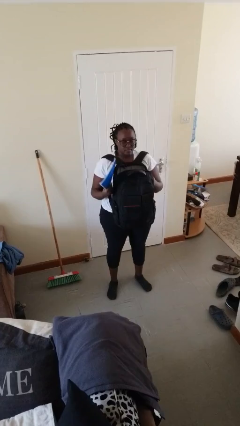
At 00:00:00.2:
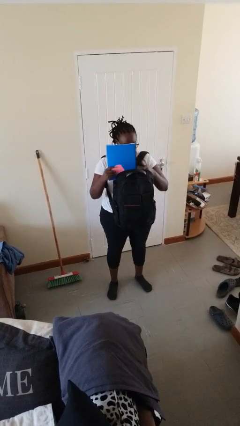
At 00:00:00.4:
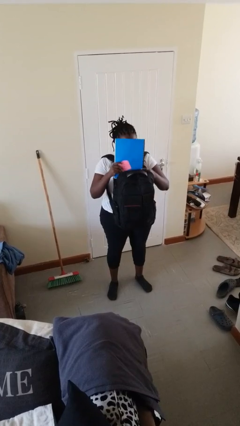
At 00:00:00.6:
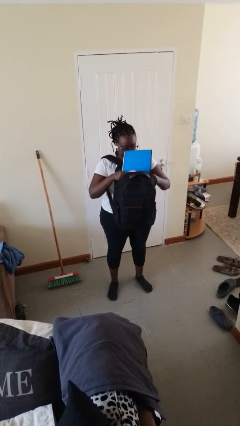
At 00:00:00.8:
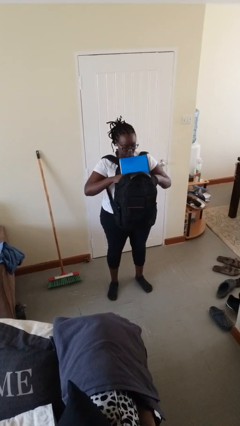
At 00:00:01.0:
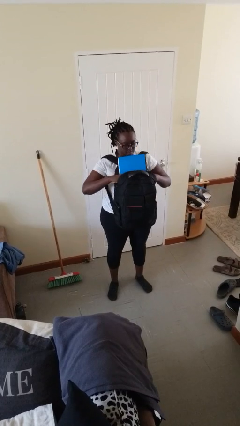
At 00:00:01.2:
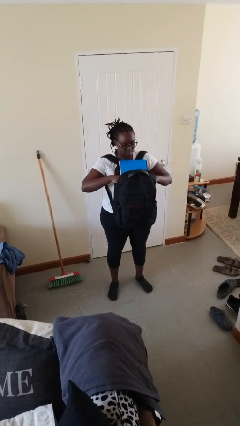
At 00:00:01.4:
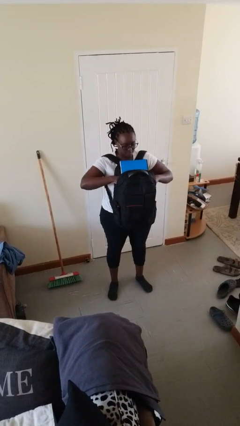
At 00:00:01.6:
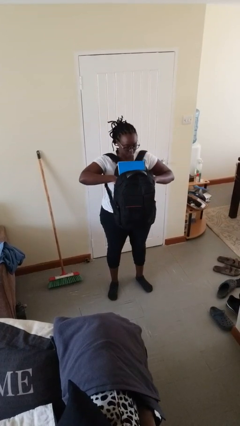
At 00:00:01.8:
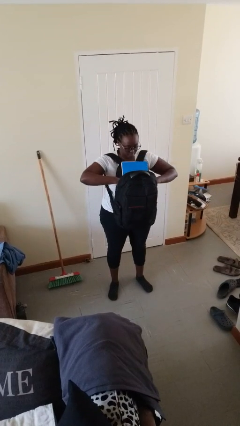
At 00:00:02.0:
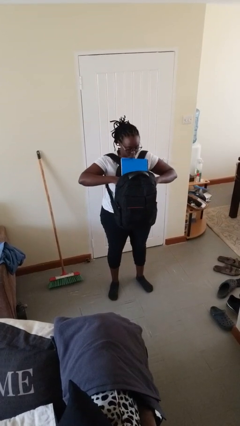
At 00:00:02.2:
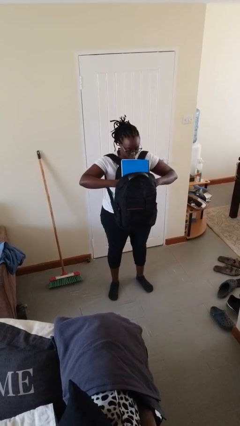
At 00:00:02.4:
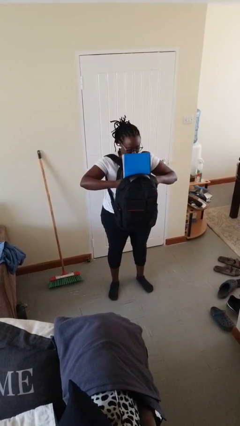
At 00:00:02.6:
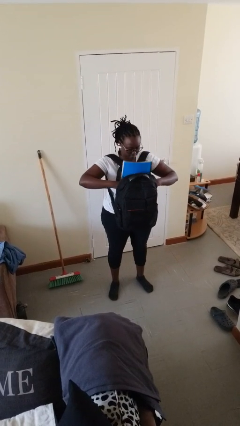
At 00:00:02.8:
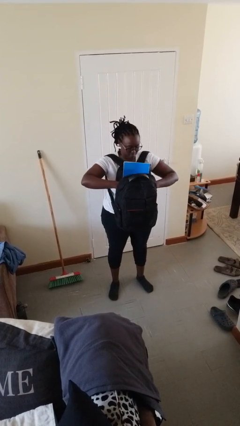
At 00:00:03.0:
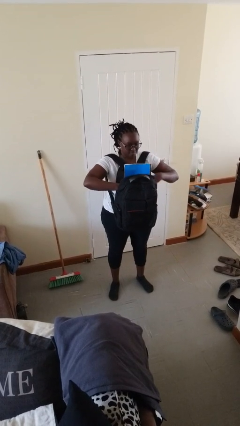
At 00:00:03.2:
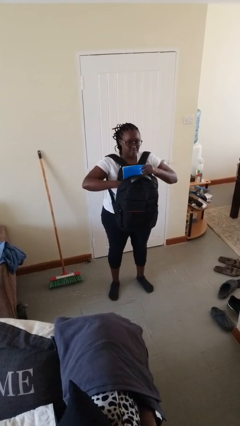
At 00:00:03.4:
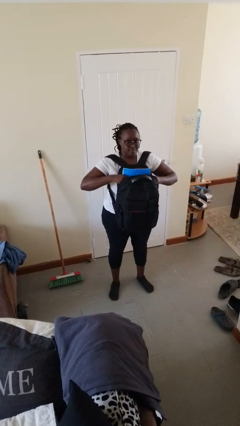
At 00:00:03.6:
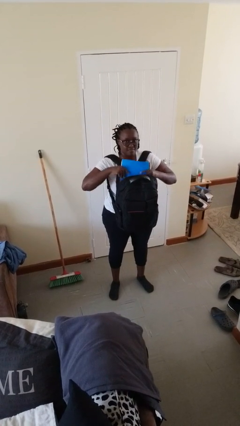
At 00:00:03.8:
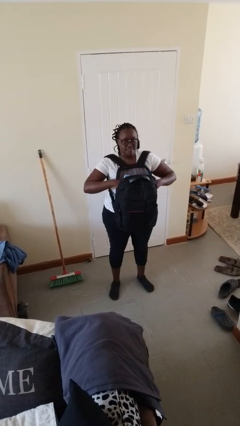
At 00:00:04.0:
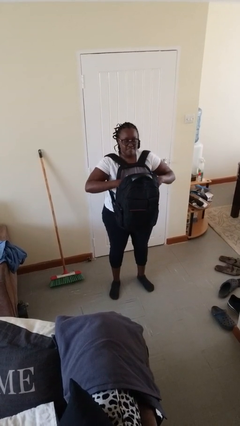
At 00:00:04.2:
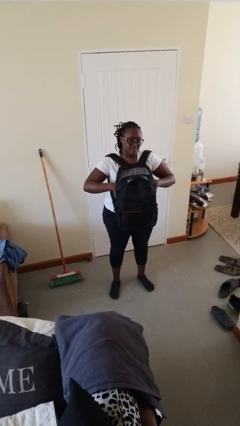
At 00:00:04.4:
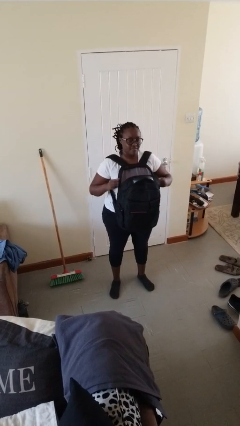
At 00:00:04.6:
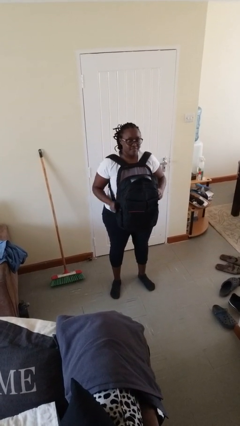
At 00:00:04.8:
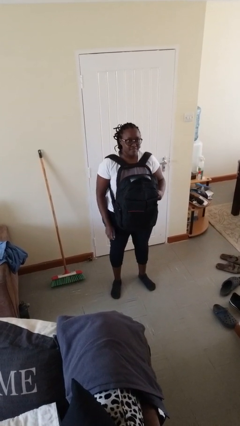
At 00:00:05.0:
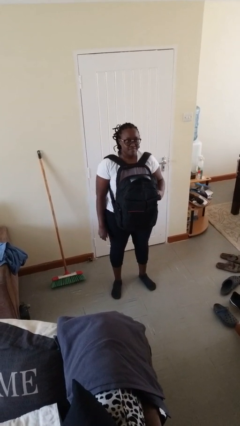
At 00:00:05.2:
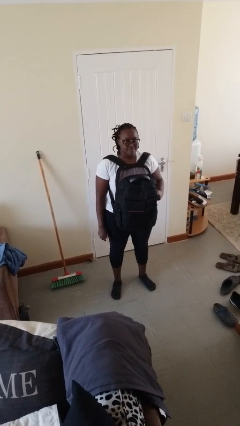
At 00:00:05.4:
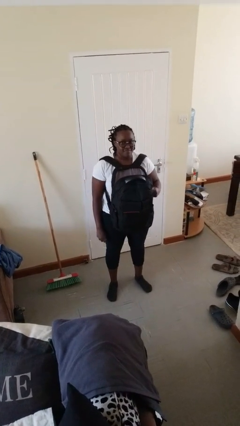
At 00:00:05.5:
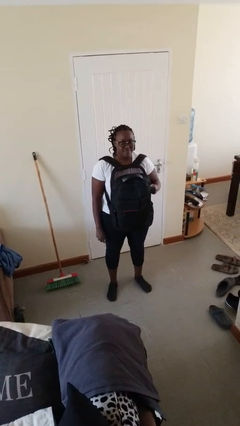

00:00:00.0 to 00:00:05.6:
person puts object into backpack

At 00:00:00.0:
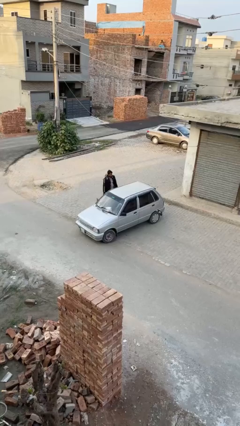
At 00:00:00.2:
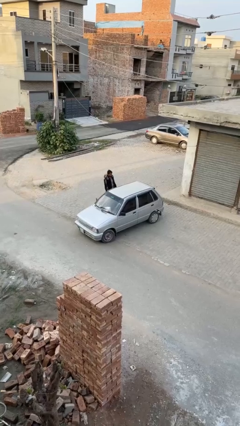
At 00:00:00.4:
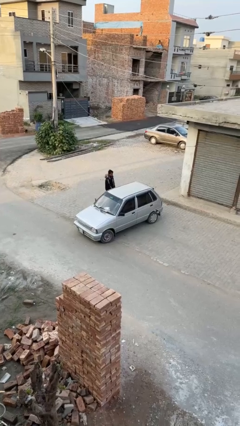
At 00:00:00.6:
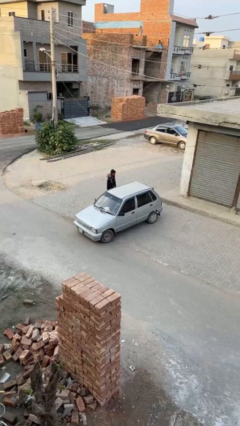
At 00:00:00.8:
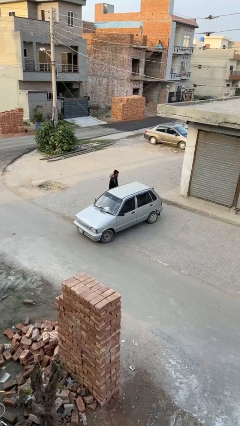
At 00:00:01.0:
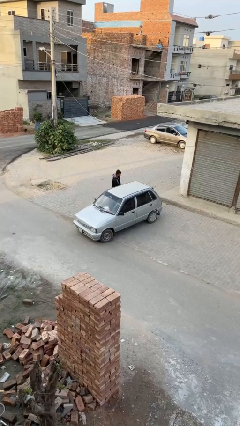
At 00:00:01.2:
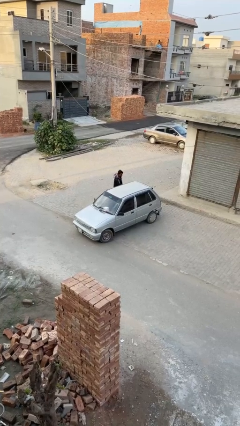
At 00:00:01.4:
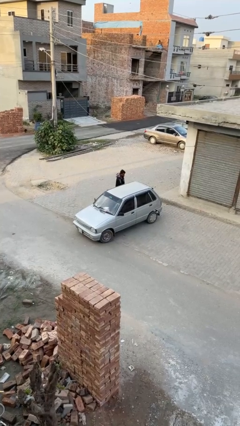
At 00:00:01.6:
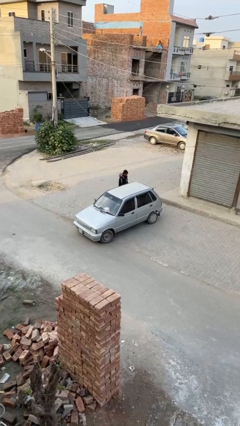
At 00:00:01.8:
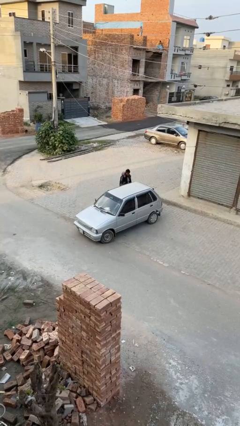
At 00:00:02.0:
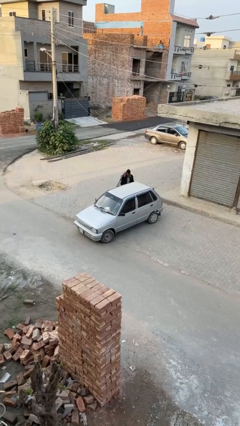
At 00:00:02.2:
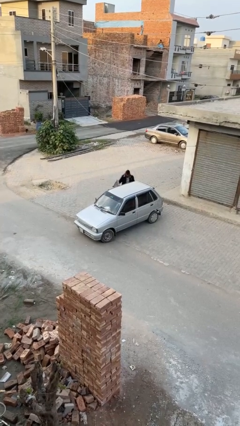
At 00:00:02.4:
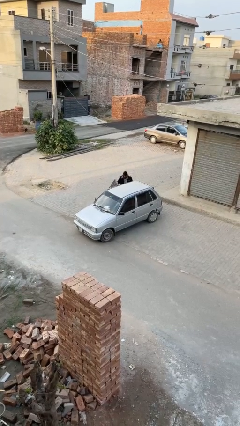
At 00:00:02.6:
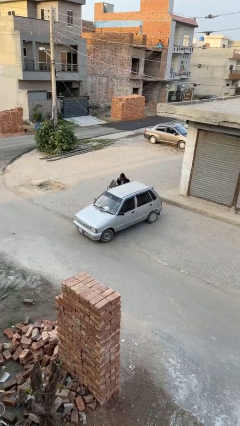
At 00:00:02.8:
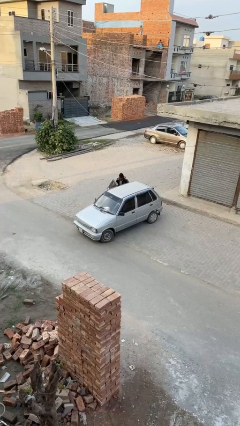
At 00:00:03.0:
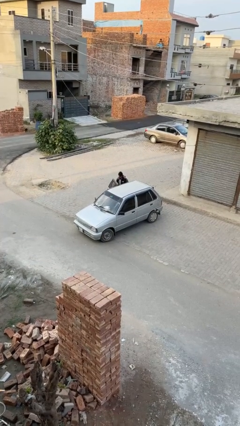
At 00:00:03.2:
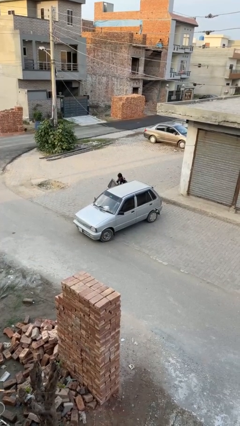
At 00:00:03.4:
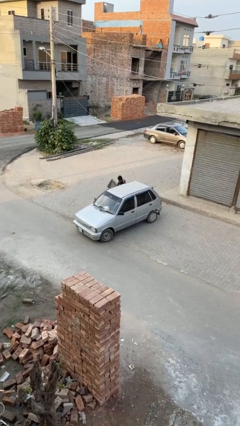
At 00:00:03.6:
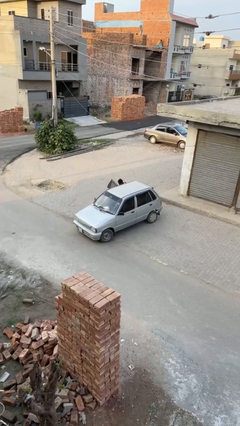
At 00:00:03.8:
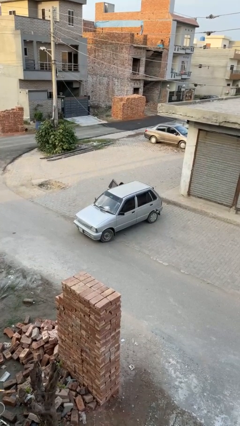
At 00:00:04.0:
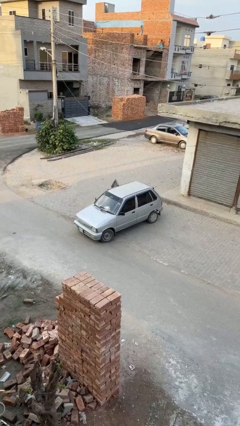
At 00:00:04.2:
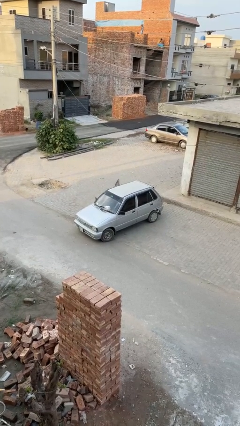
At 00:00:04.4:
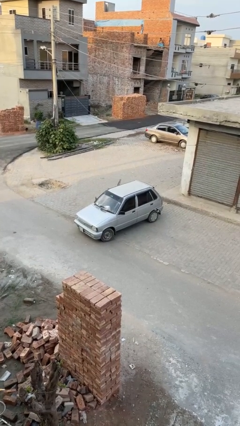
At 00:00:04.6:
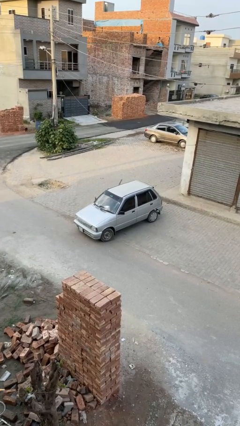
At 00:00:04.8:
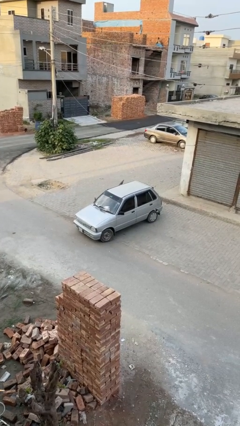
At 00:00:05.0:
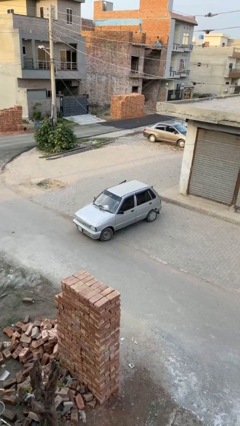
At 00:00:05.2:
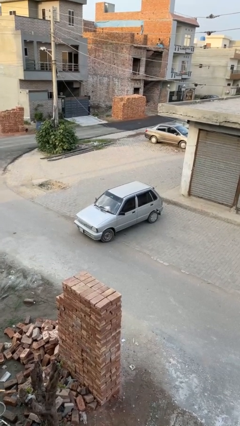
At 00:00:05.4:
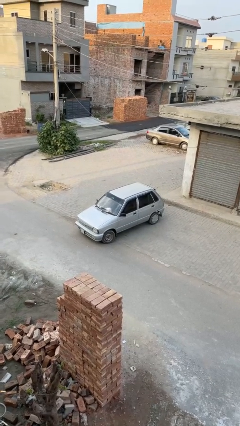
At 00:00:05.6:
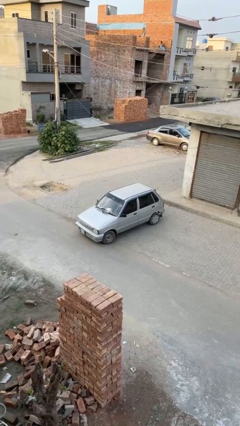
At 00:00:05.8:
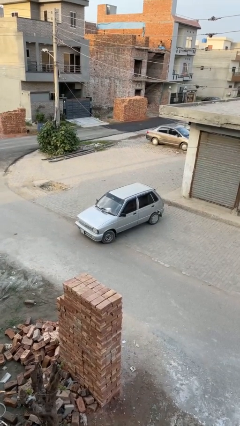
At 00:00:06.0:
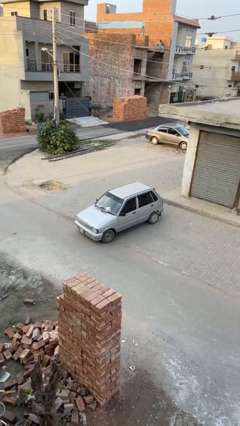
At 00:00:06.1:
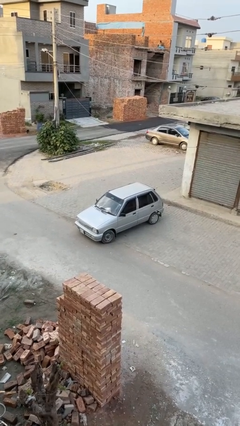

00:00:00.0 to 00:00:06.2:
car picks up person

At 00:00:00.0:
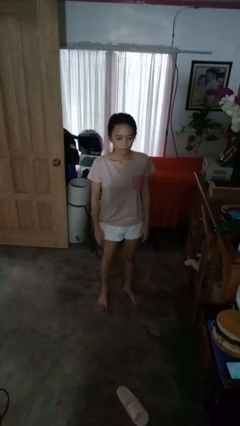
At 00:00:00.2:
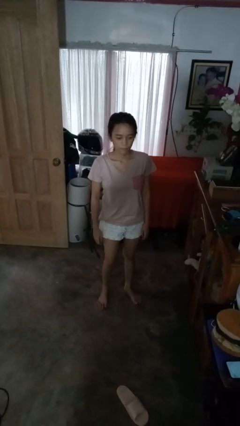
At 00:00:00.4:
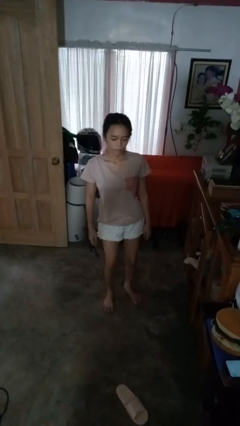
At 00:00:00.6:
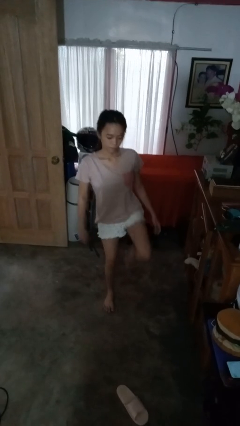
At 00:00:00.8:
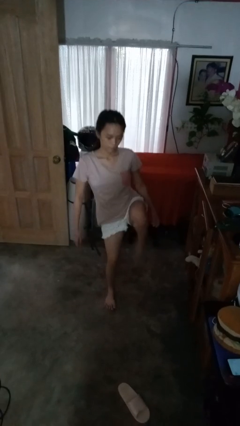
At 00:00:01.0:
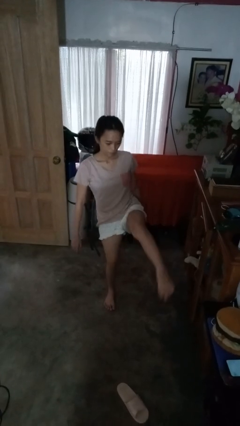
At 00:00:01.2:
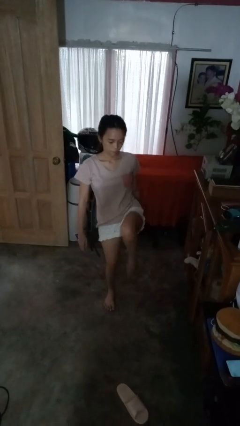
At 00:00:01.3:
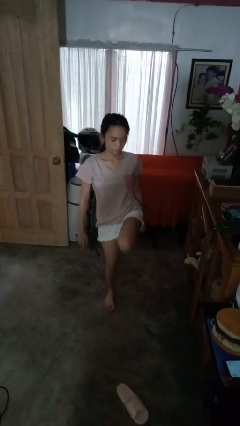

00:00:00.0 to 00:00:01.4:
person karate kicks

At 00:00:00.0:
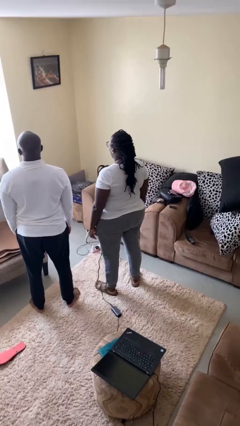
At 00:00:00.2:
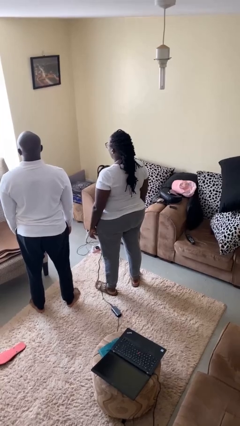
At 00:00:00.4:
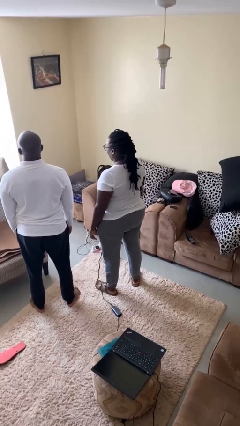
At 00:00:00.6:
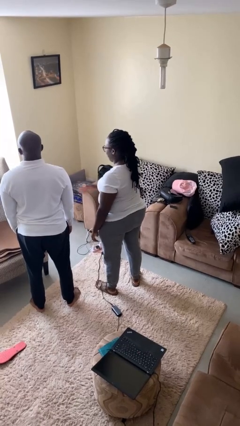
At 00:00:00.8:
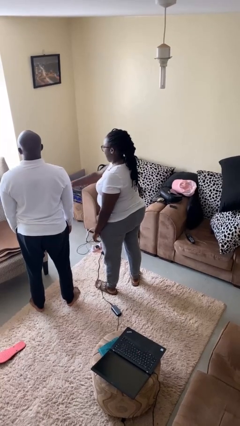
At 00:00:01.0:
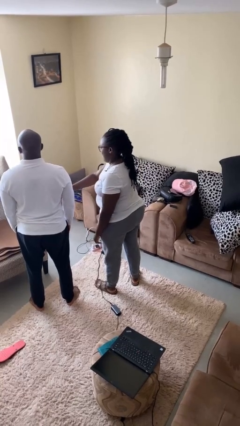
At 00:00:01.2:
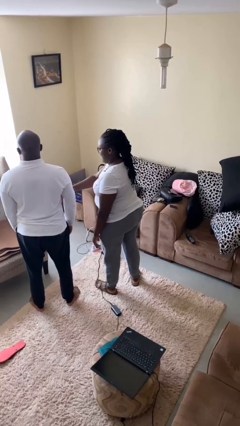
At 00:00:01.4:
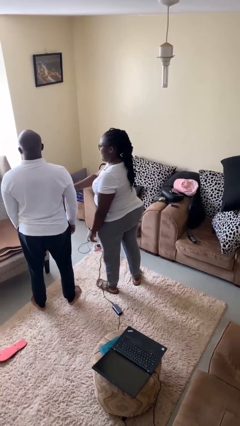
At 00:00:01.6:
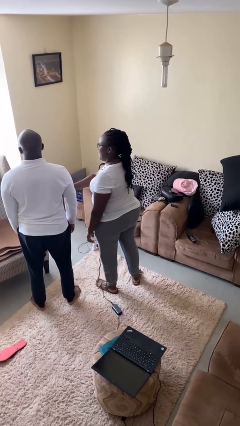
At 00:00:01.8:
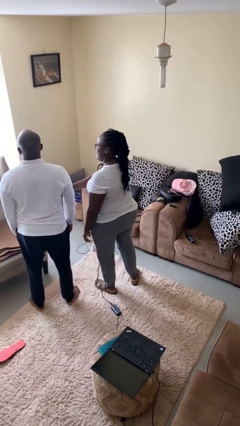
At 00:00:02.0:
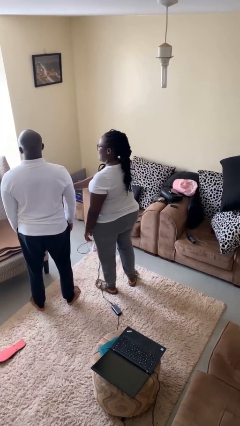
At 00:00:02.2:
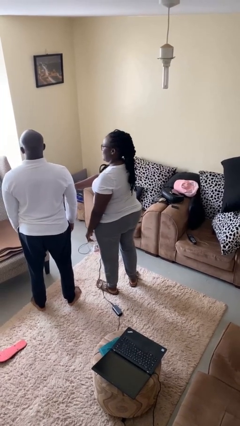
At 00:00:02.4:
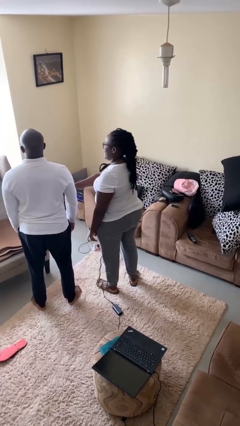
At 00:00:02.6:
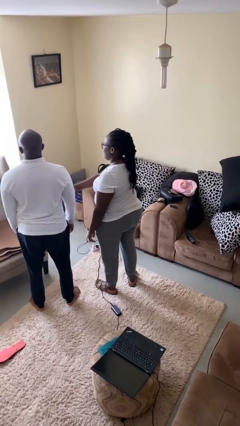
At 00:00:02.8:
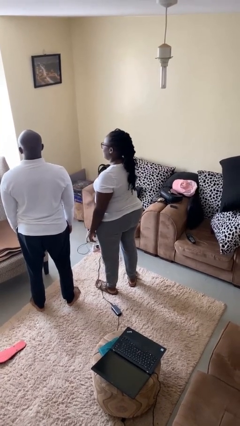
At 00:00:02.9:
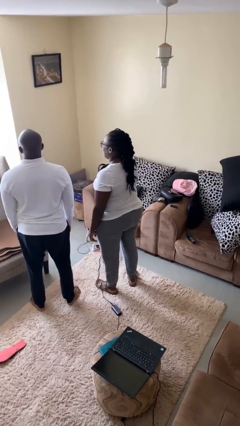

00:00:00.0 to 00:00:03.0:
person grabs person by bicep

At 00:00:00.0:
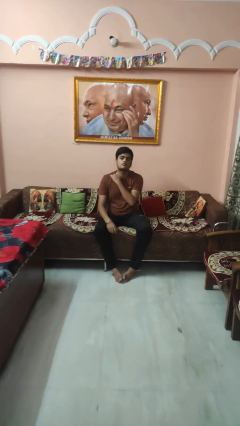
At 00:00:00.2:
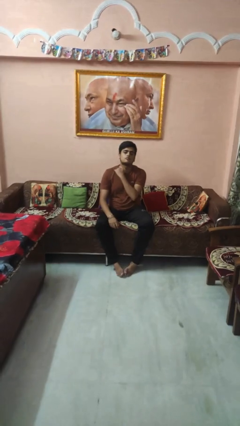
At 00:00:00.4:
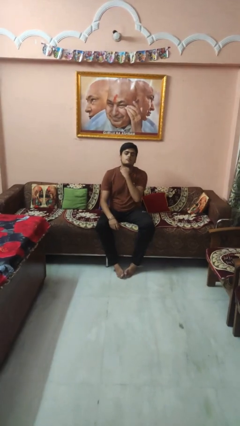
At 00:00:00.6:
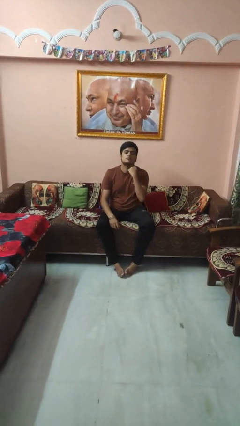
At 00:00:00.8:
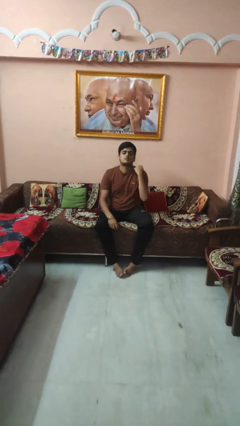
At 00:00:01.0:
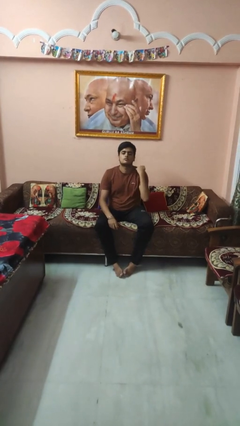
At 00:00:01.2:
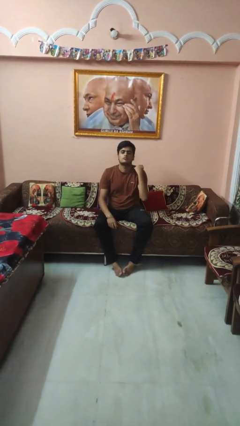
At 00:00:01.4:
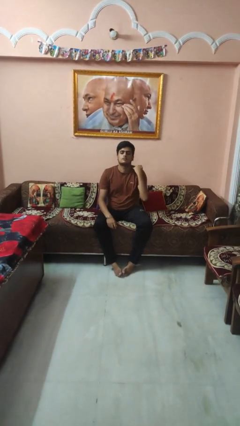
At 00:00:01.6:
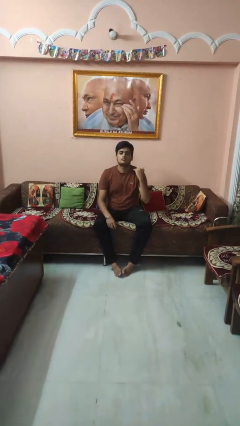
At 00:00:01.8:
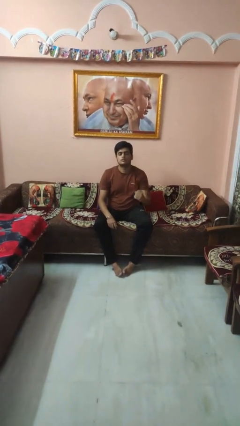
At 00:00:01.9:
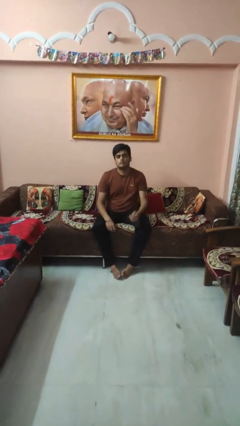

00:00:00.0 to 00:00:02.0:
person gestures cut
